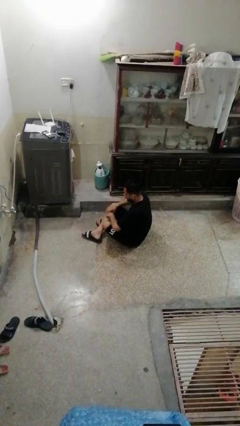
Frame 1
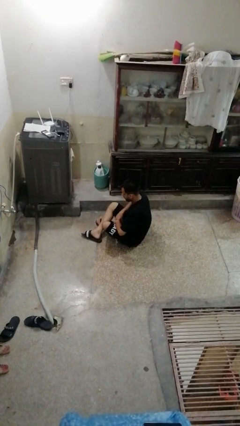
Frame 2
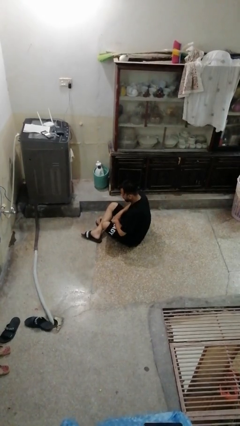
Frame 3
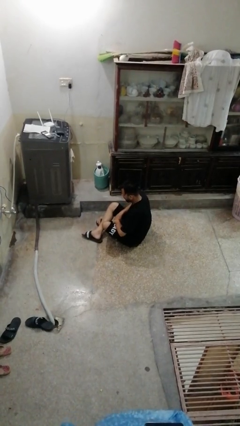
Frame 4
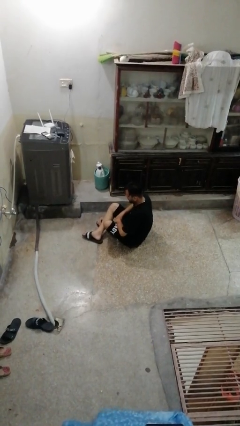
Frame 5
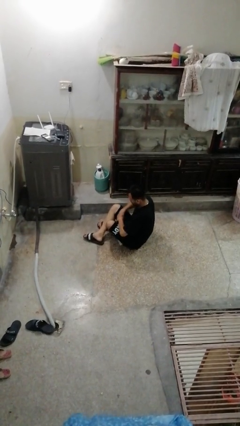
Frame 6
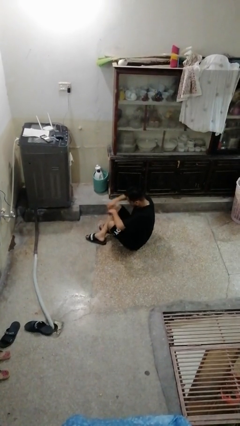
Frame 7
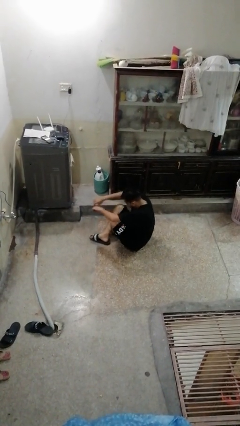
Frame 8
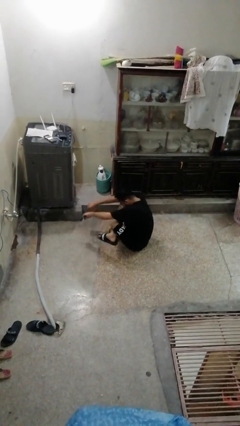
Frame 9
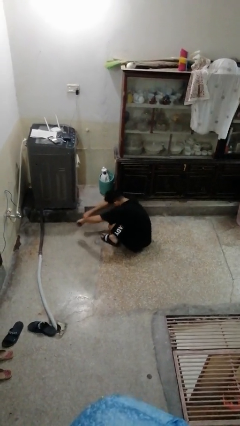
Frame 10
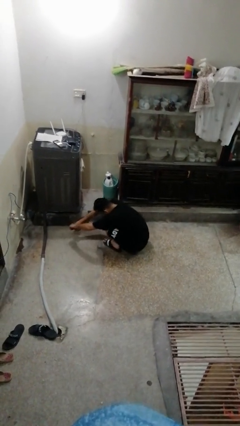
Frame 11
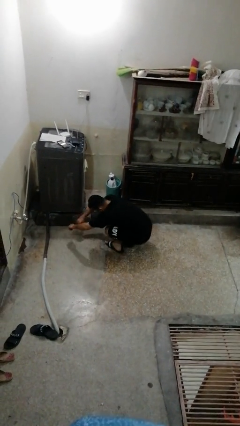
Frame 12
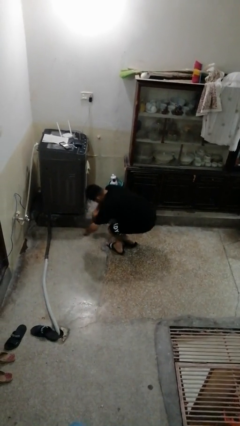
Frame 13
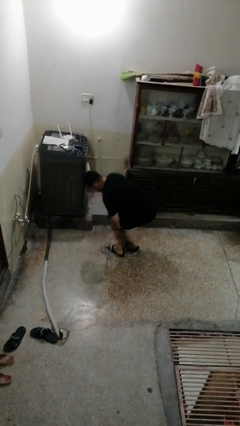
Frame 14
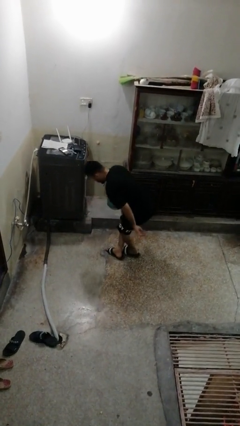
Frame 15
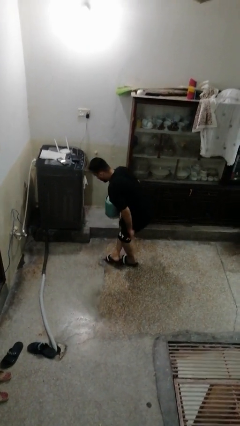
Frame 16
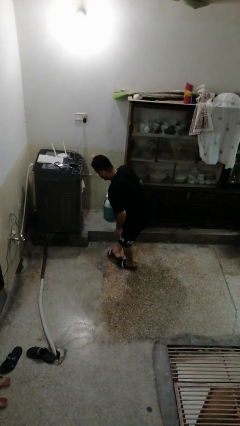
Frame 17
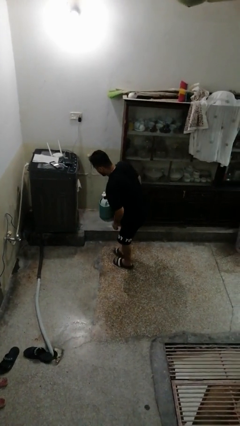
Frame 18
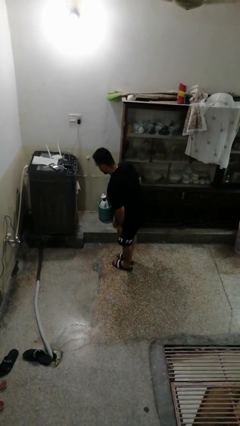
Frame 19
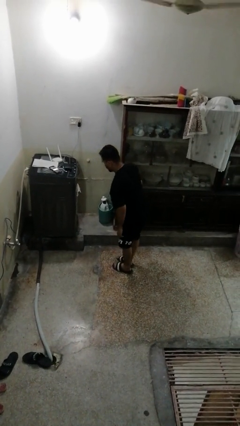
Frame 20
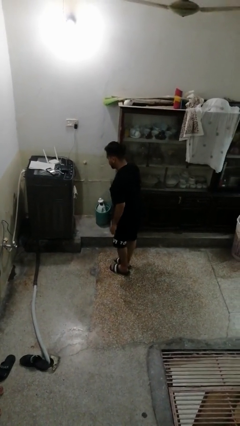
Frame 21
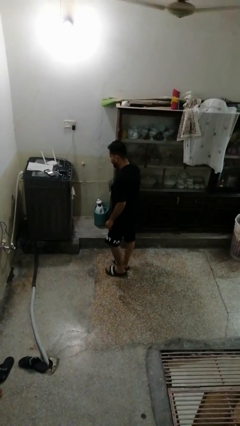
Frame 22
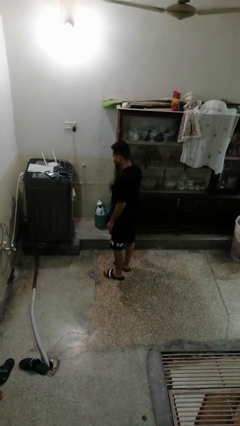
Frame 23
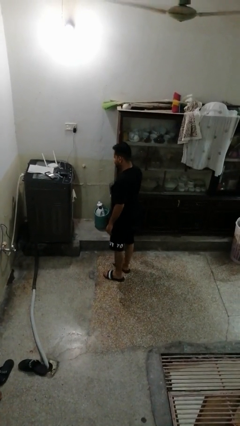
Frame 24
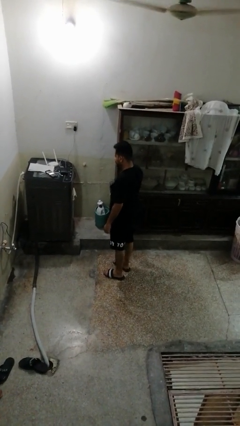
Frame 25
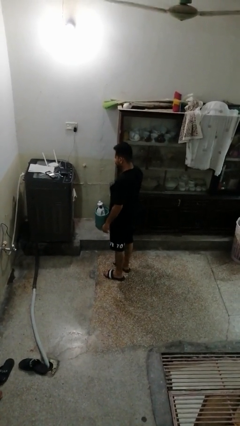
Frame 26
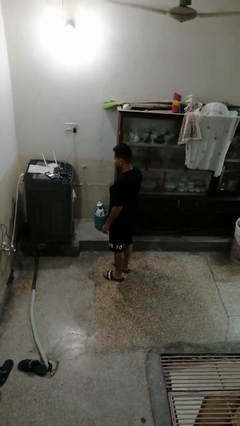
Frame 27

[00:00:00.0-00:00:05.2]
person stands up from floor

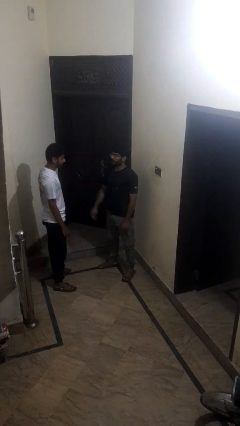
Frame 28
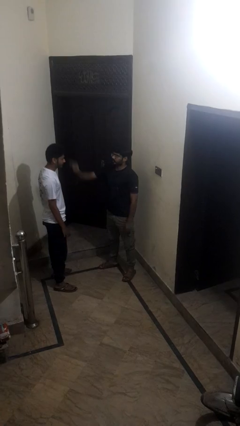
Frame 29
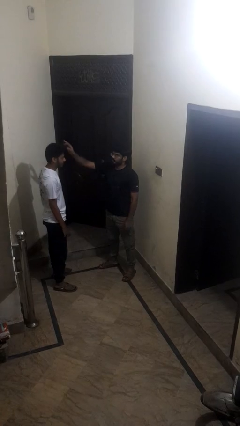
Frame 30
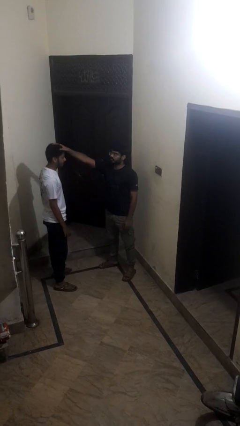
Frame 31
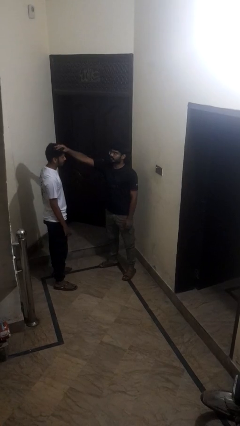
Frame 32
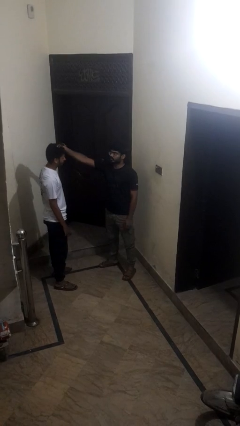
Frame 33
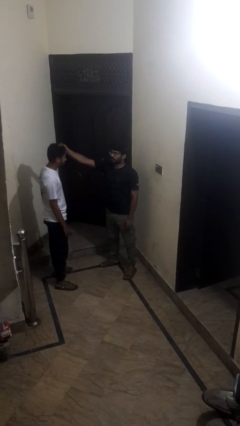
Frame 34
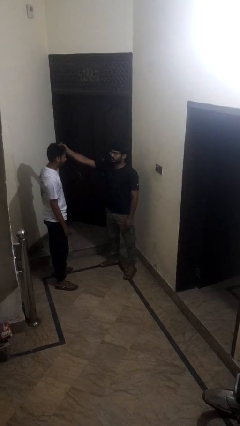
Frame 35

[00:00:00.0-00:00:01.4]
person grabs person by hair

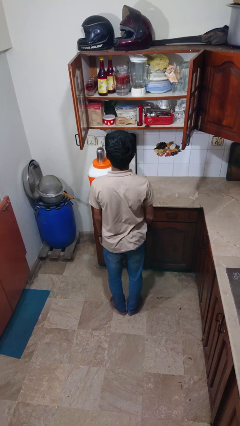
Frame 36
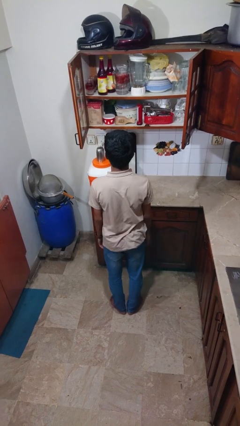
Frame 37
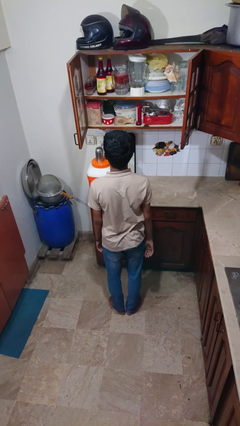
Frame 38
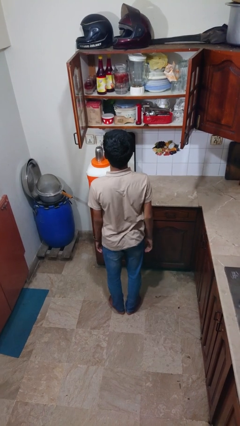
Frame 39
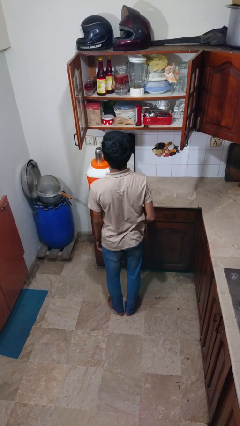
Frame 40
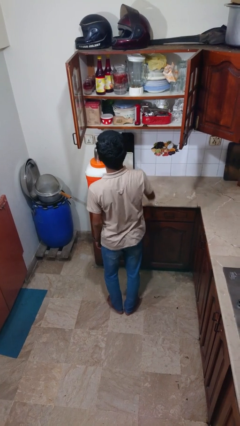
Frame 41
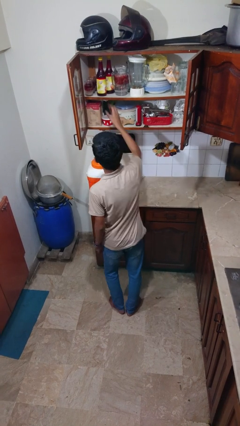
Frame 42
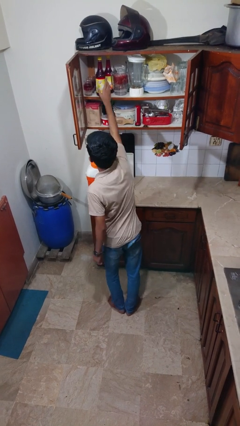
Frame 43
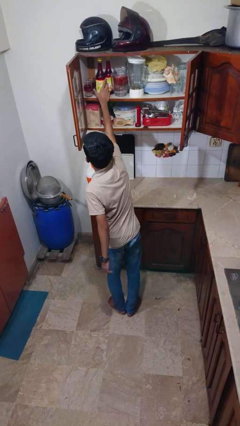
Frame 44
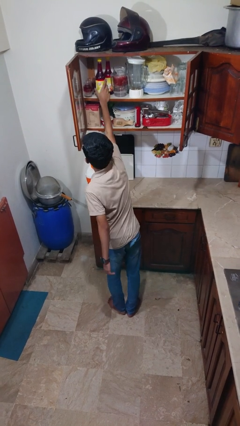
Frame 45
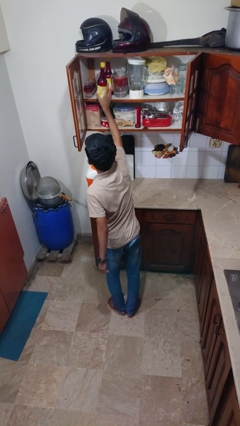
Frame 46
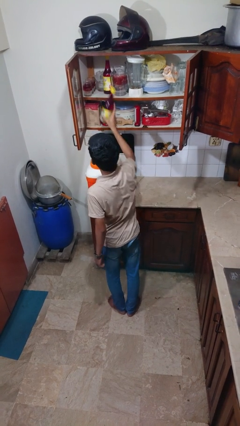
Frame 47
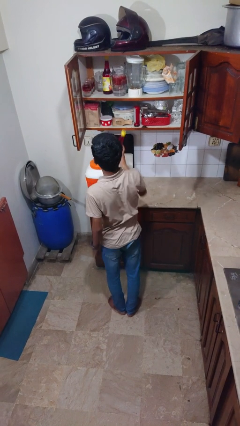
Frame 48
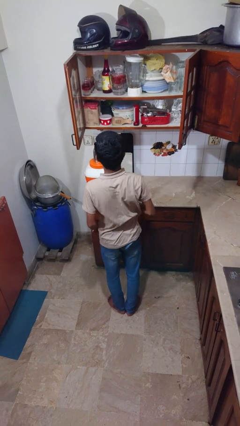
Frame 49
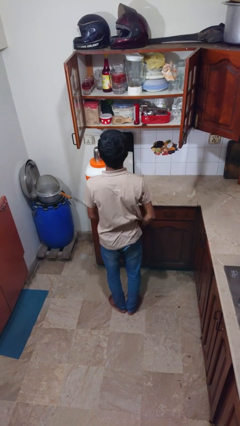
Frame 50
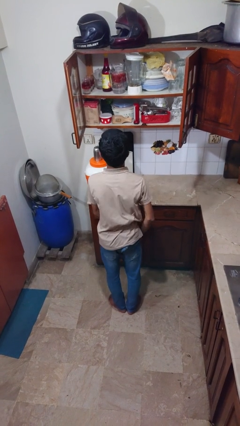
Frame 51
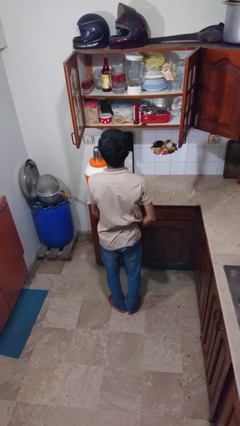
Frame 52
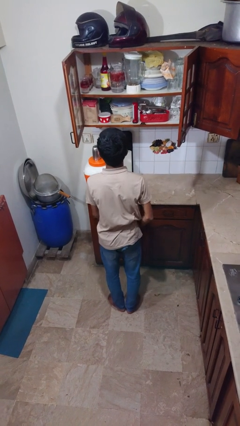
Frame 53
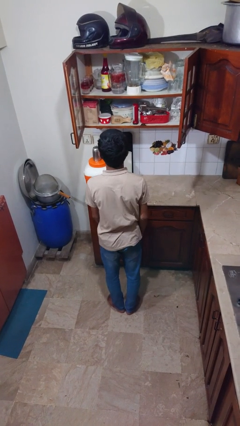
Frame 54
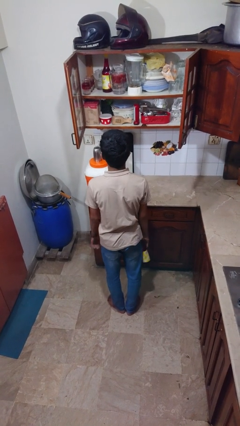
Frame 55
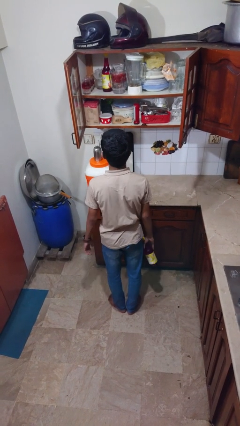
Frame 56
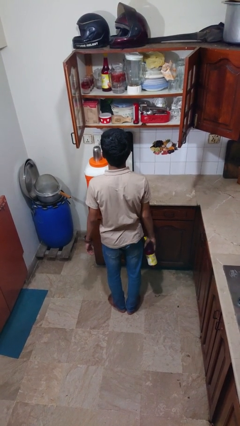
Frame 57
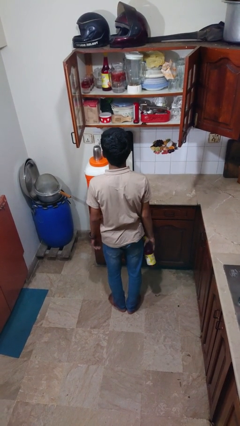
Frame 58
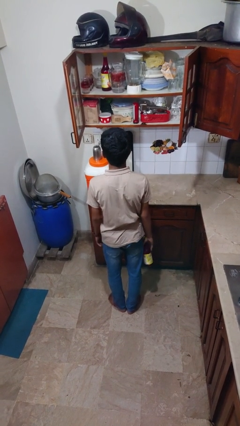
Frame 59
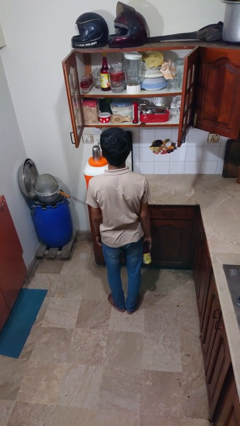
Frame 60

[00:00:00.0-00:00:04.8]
person picks up object from cabinet

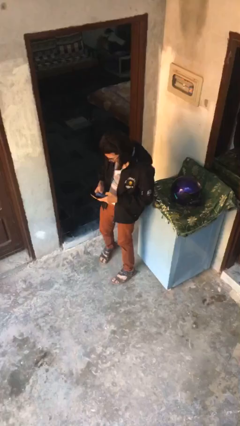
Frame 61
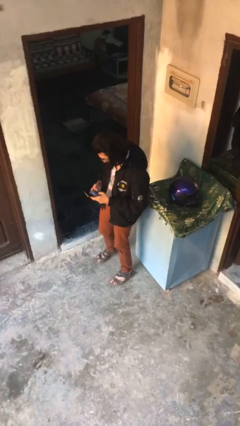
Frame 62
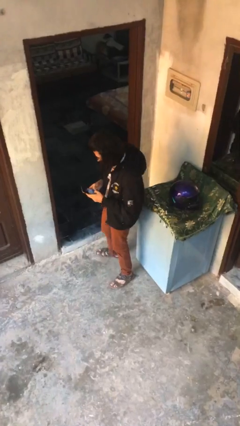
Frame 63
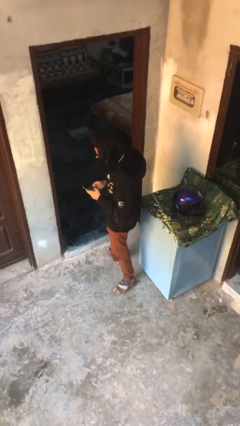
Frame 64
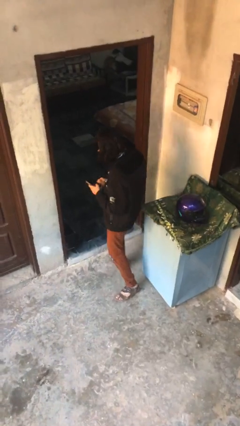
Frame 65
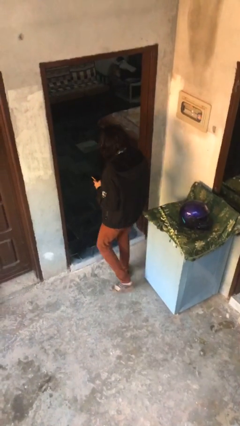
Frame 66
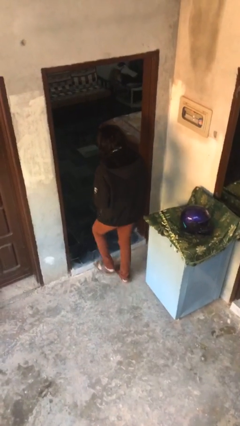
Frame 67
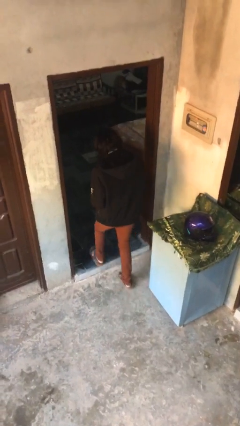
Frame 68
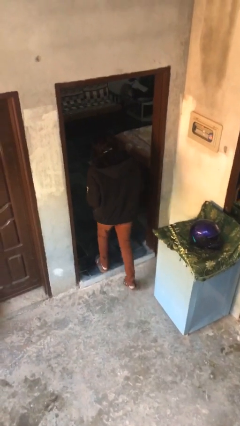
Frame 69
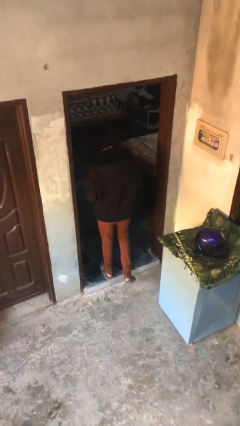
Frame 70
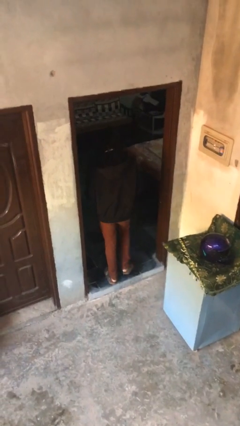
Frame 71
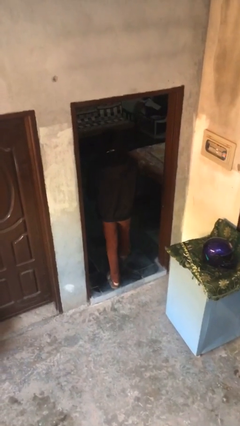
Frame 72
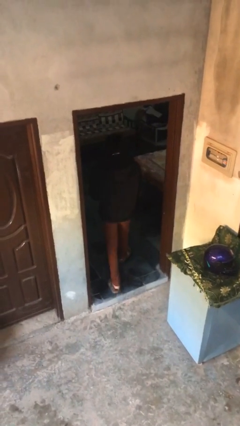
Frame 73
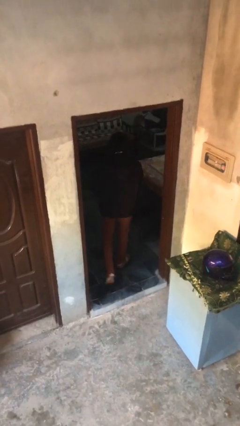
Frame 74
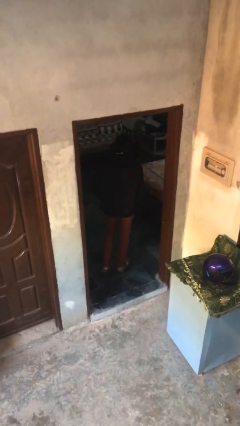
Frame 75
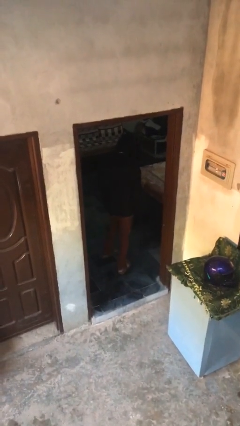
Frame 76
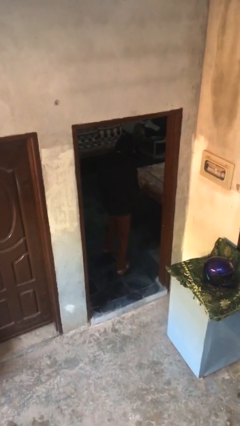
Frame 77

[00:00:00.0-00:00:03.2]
person enters scene through structure

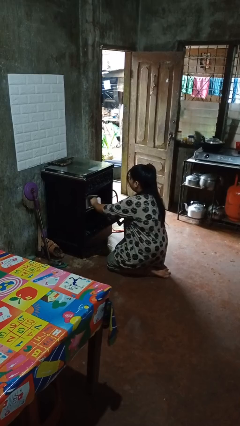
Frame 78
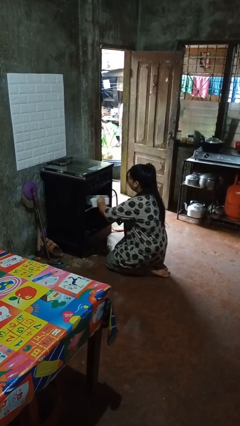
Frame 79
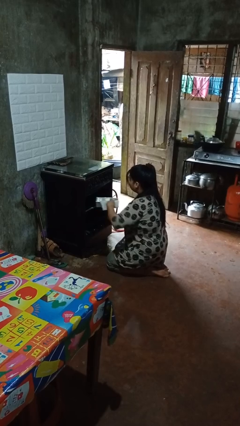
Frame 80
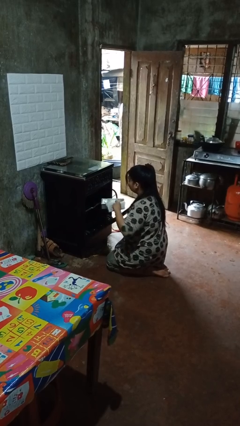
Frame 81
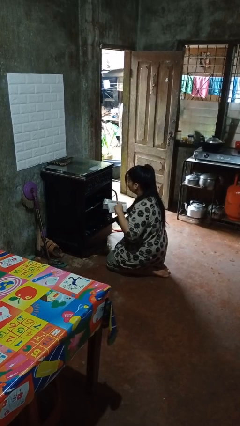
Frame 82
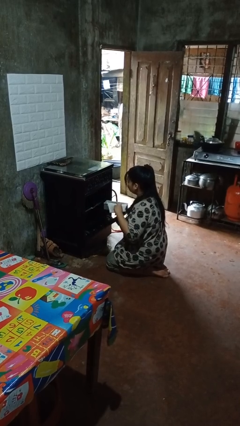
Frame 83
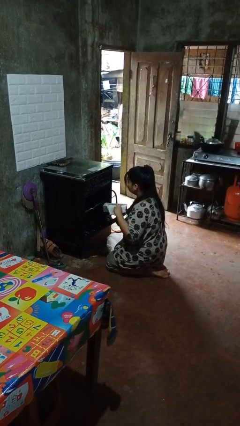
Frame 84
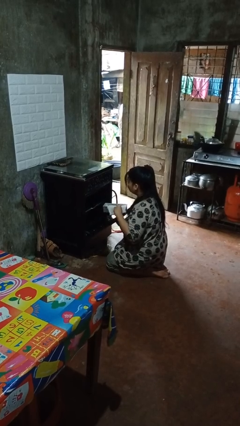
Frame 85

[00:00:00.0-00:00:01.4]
person takes object from oven

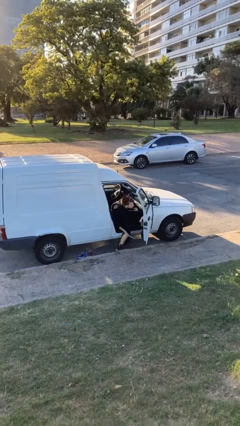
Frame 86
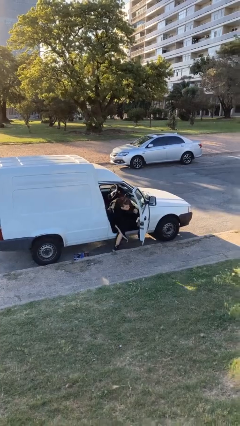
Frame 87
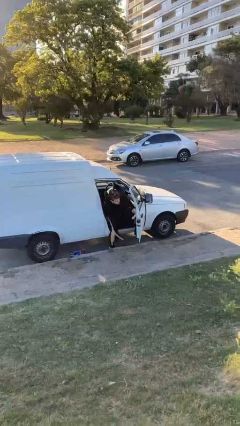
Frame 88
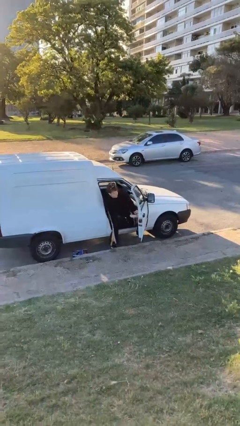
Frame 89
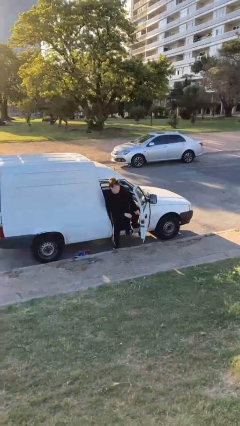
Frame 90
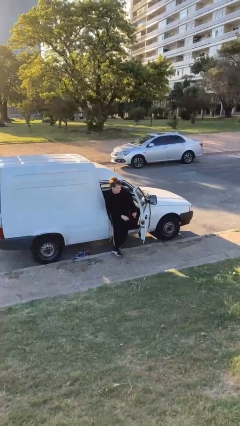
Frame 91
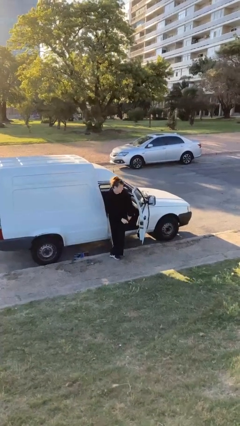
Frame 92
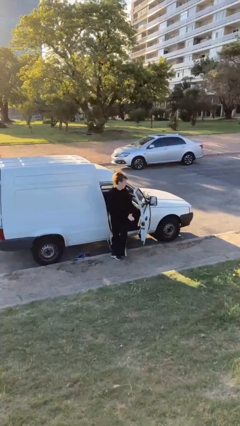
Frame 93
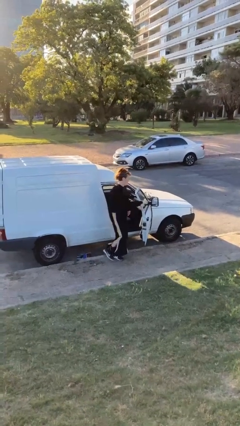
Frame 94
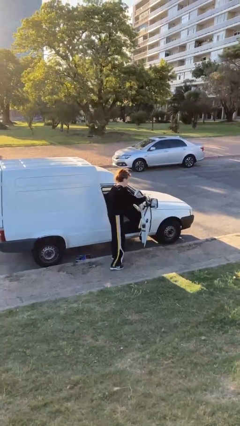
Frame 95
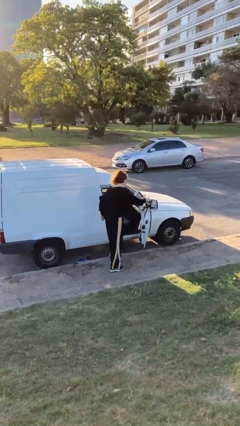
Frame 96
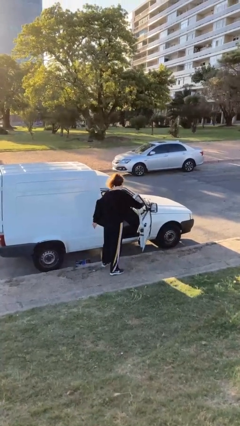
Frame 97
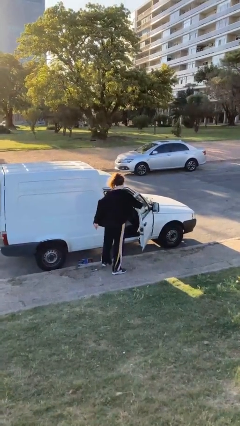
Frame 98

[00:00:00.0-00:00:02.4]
person exits car
